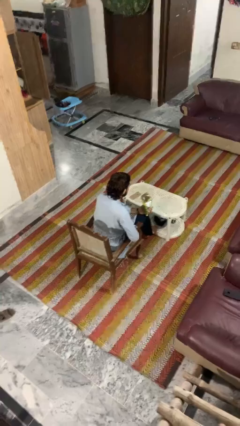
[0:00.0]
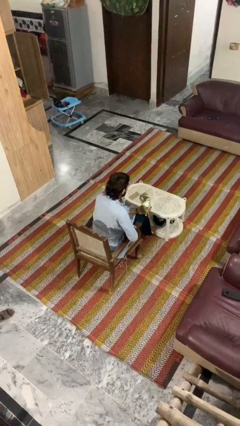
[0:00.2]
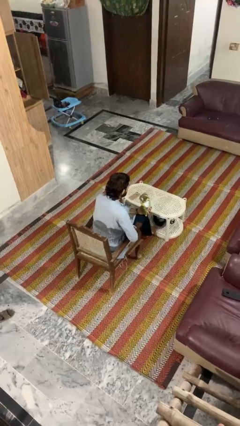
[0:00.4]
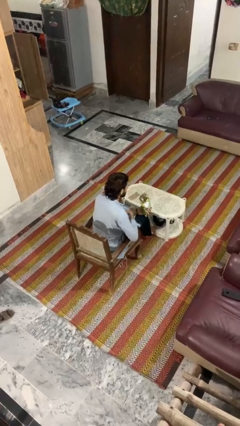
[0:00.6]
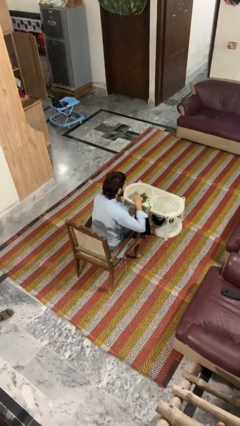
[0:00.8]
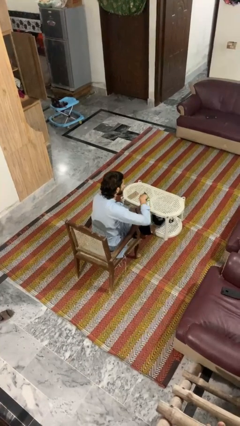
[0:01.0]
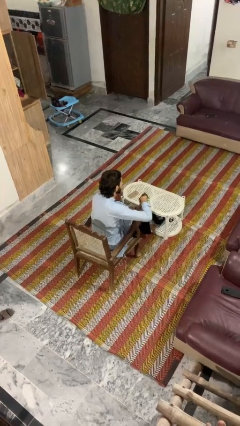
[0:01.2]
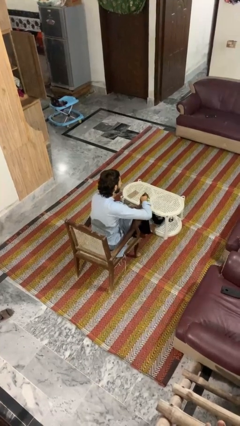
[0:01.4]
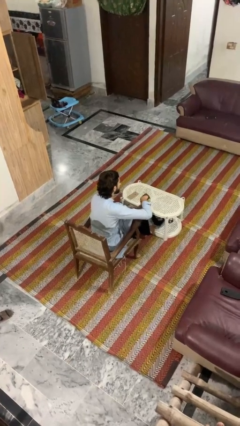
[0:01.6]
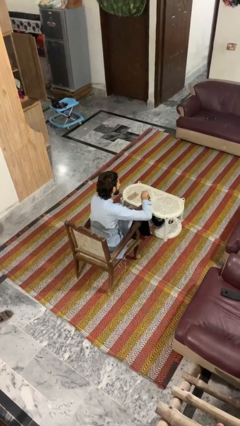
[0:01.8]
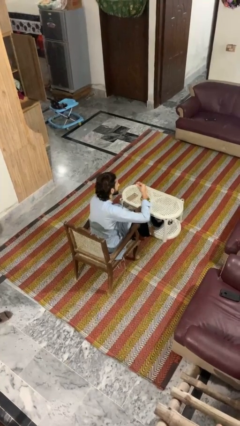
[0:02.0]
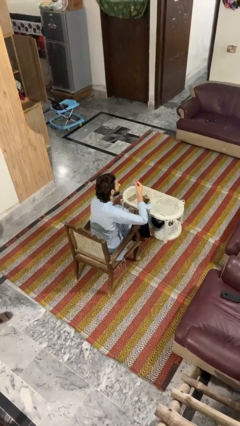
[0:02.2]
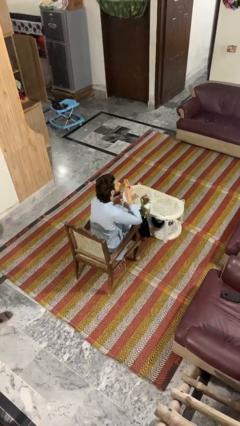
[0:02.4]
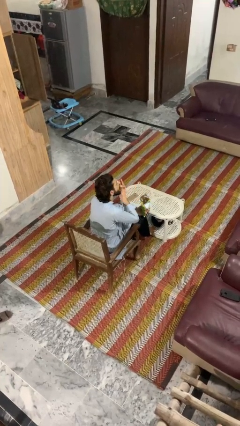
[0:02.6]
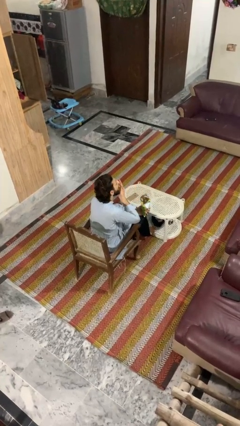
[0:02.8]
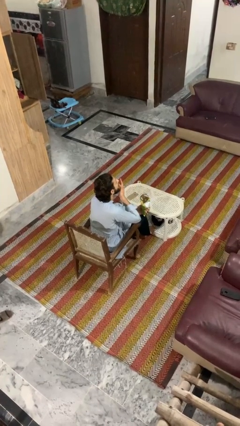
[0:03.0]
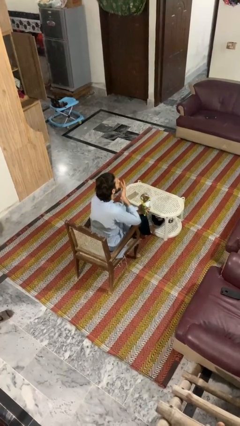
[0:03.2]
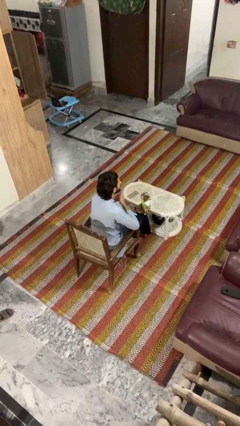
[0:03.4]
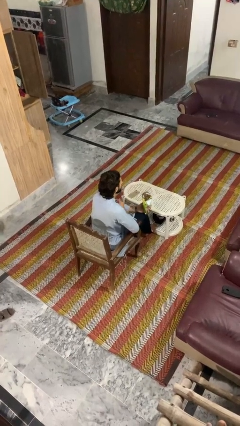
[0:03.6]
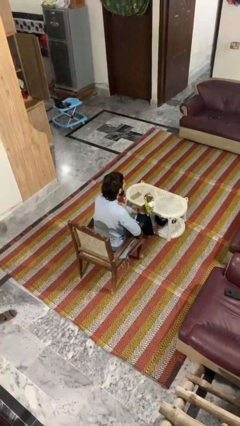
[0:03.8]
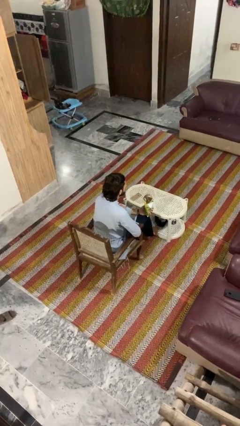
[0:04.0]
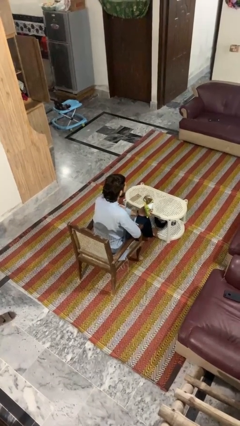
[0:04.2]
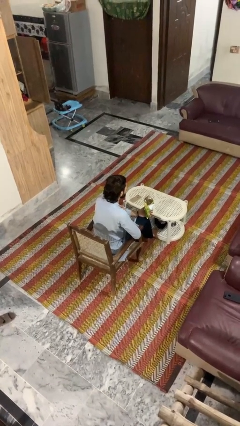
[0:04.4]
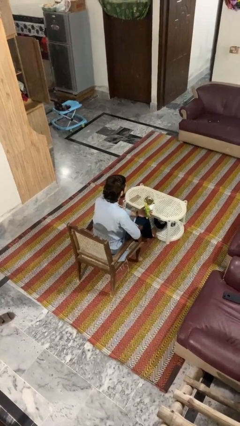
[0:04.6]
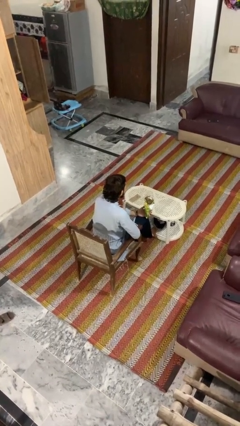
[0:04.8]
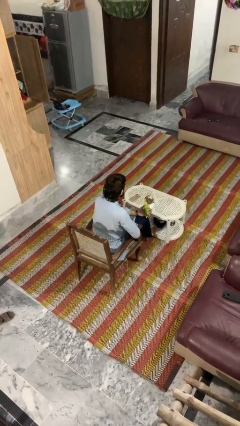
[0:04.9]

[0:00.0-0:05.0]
person eats snack from bag

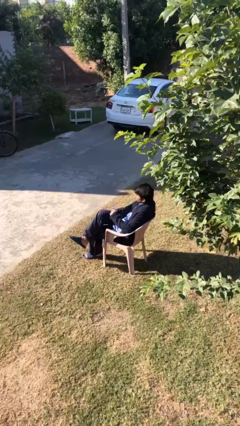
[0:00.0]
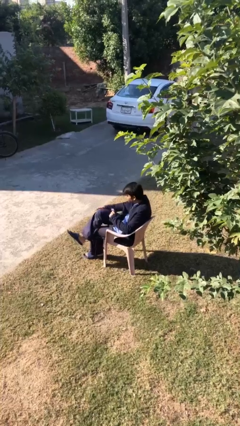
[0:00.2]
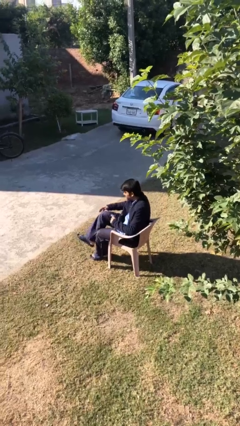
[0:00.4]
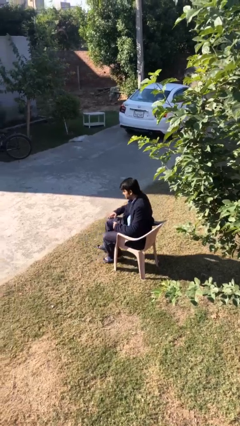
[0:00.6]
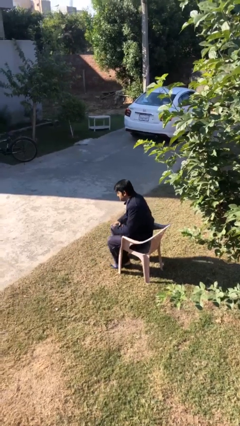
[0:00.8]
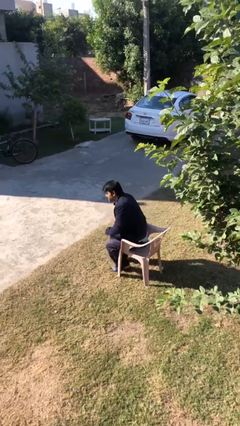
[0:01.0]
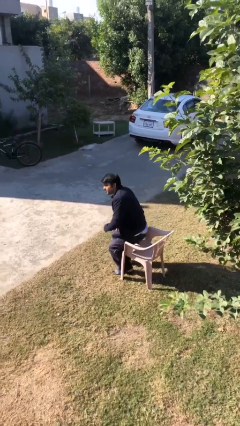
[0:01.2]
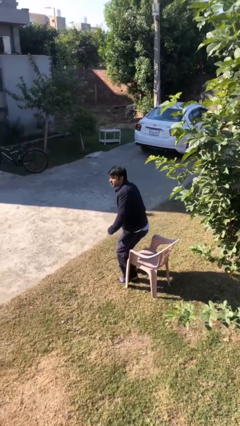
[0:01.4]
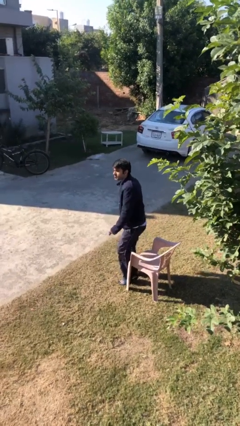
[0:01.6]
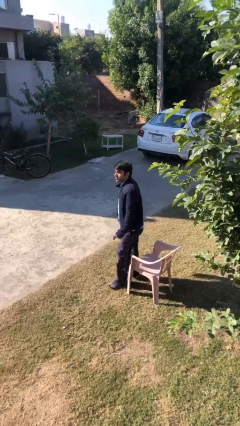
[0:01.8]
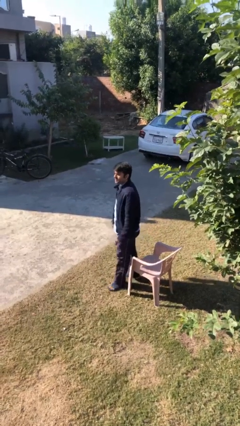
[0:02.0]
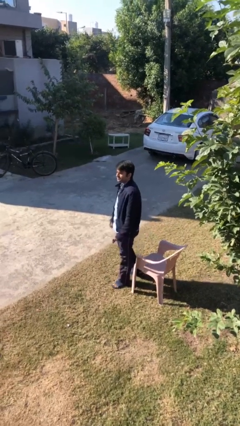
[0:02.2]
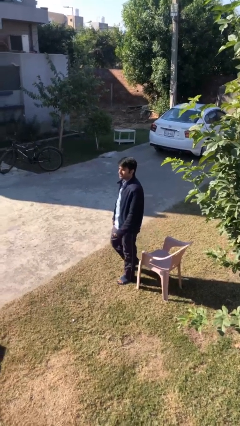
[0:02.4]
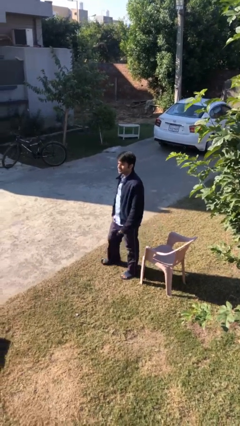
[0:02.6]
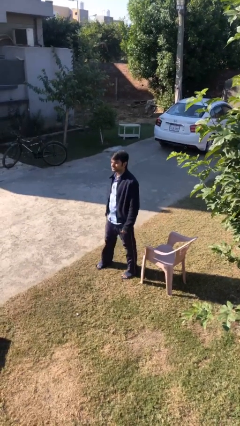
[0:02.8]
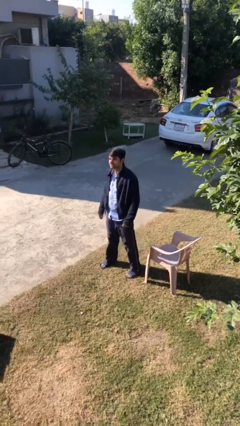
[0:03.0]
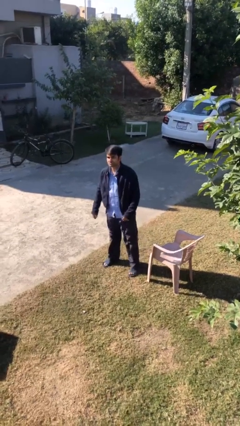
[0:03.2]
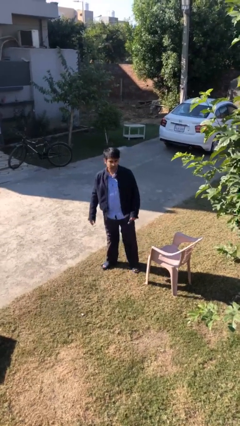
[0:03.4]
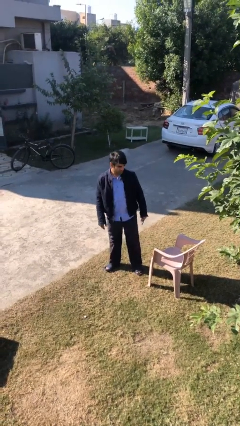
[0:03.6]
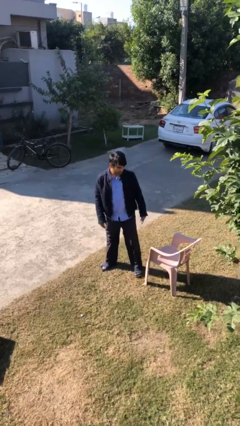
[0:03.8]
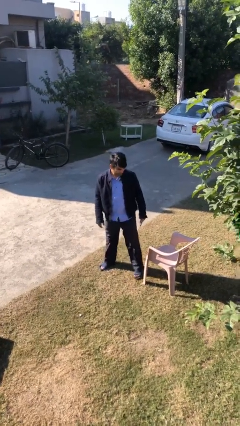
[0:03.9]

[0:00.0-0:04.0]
person stands up

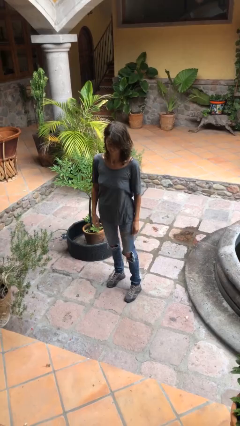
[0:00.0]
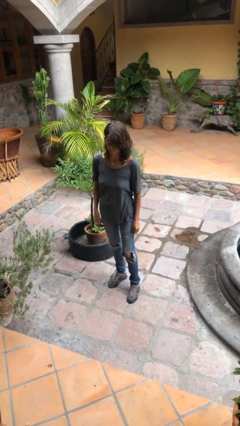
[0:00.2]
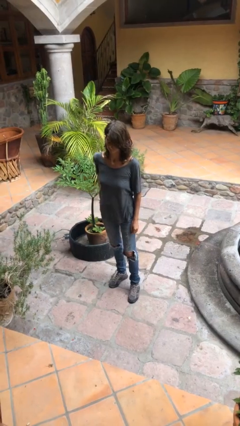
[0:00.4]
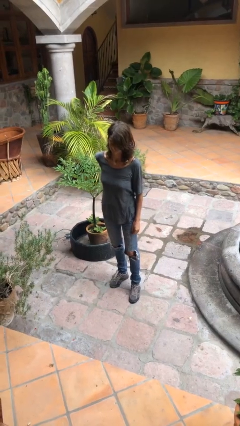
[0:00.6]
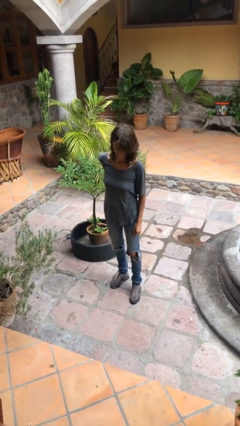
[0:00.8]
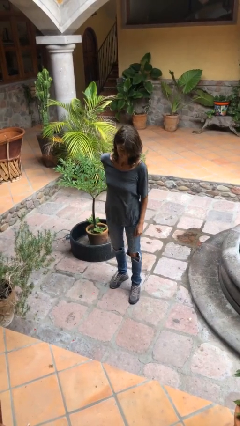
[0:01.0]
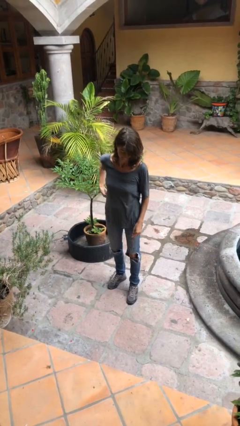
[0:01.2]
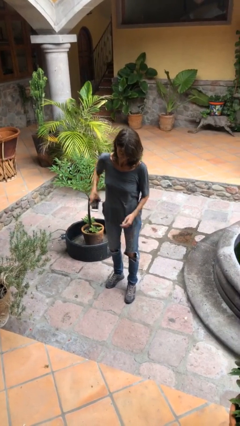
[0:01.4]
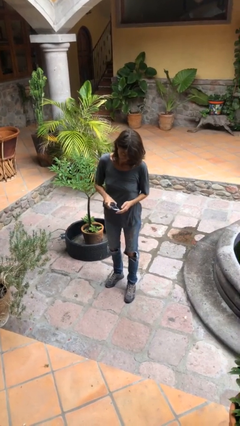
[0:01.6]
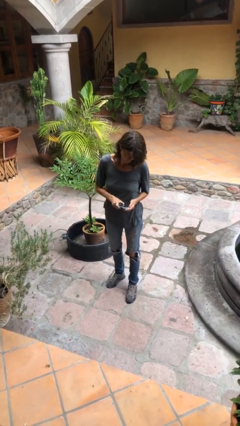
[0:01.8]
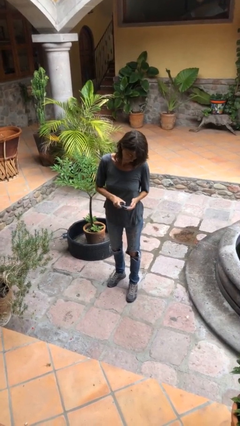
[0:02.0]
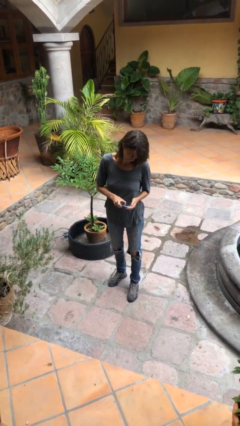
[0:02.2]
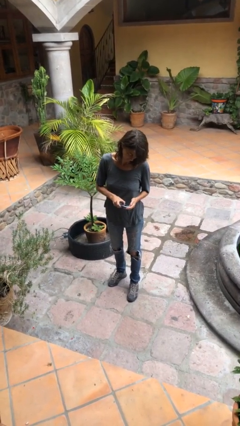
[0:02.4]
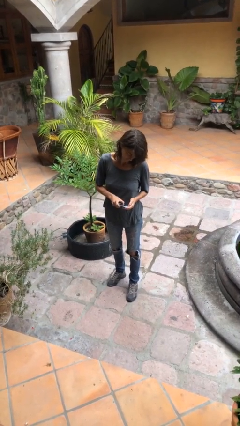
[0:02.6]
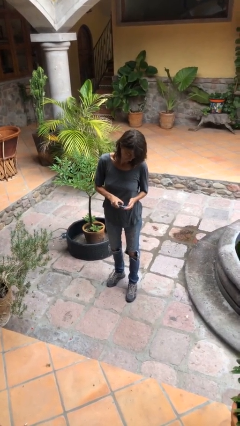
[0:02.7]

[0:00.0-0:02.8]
person takes phone from pocket

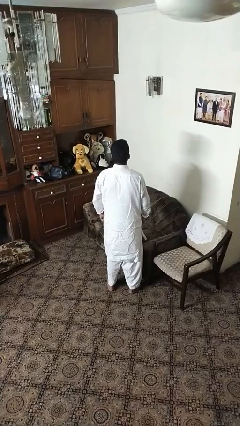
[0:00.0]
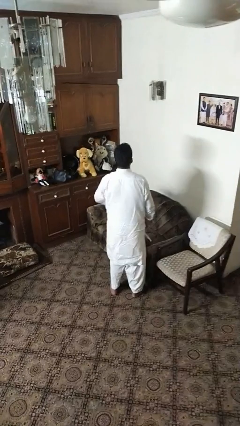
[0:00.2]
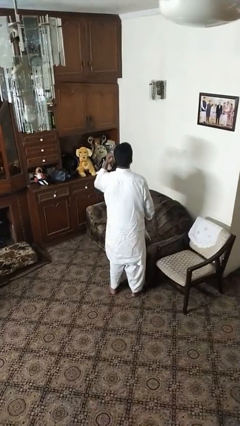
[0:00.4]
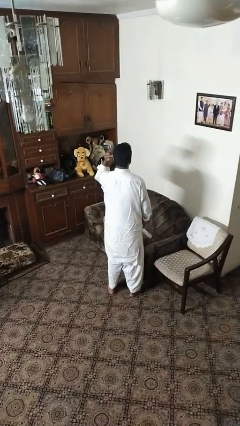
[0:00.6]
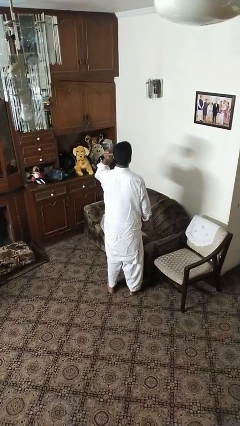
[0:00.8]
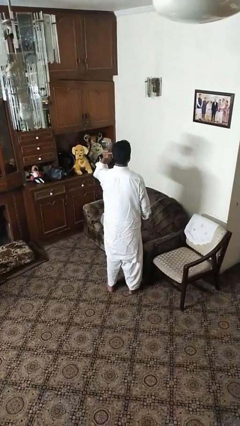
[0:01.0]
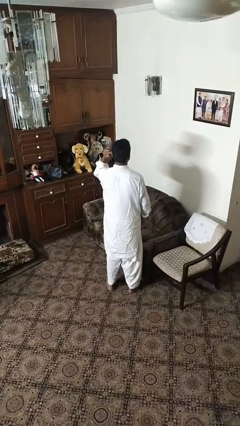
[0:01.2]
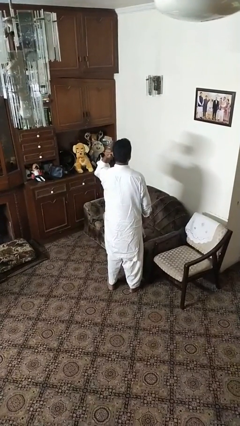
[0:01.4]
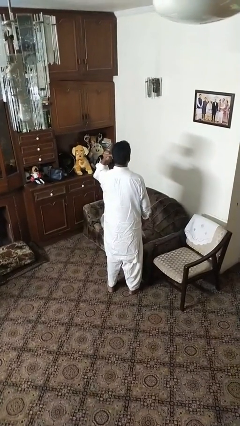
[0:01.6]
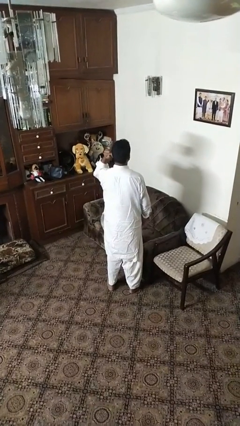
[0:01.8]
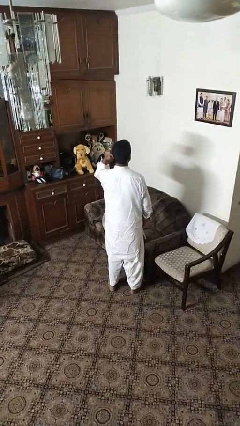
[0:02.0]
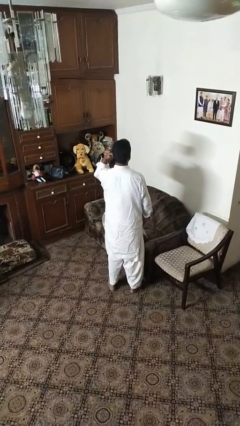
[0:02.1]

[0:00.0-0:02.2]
person gestures listen closely

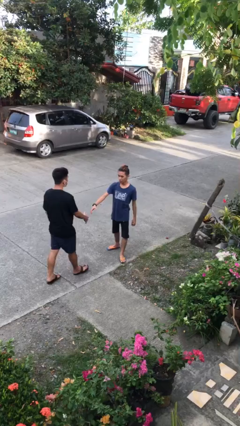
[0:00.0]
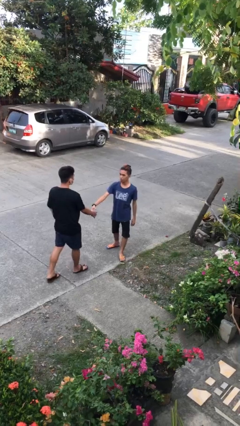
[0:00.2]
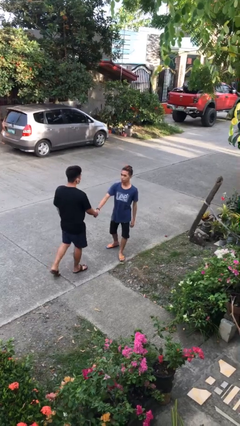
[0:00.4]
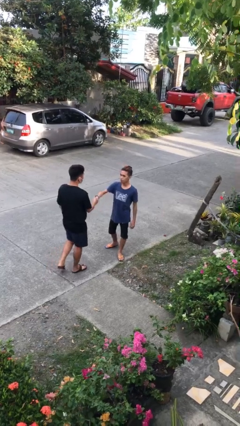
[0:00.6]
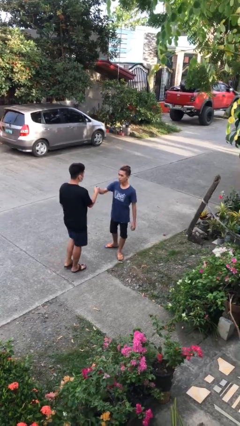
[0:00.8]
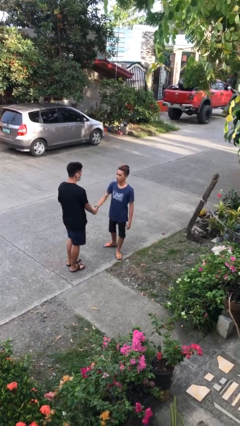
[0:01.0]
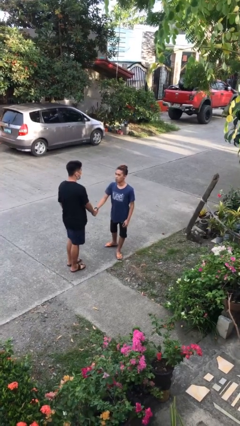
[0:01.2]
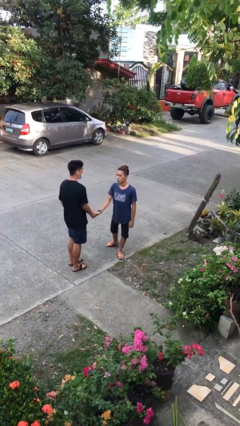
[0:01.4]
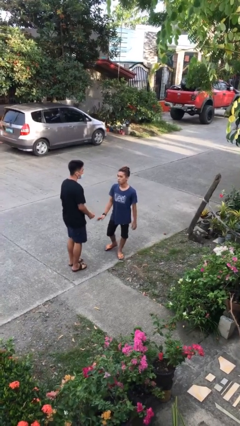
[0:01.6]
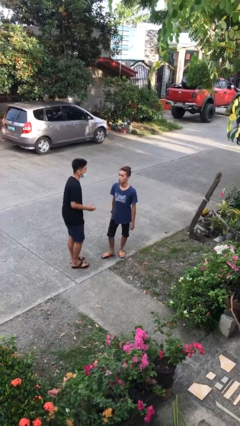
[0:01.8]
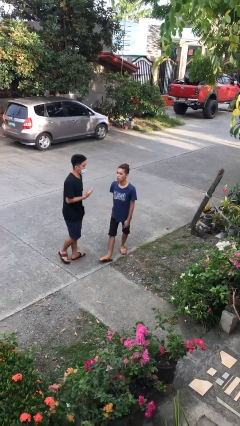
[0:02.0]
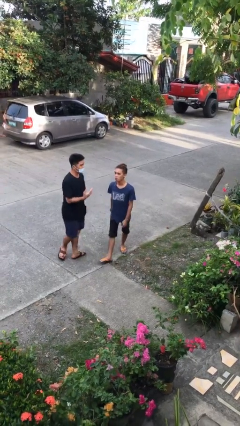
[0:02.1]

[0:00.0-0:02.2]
person shakes hand

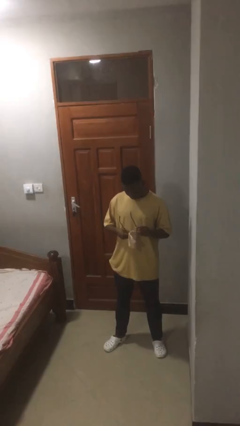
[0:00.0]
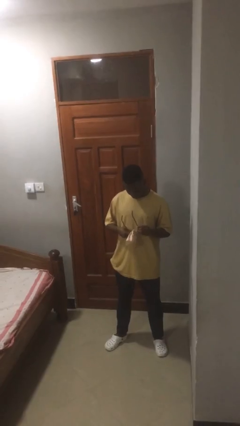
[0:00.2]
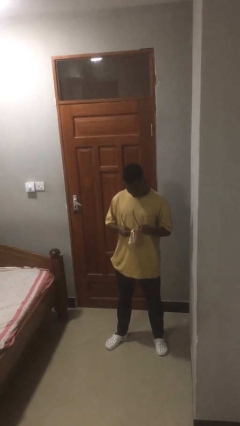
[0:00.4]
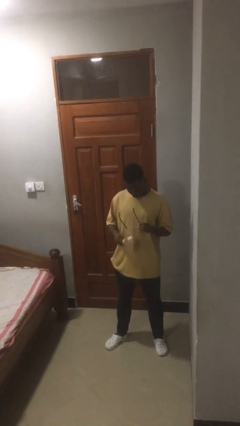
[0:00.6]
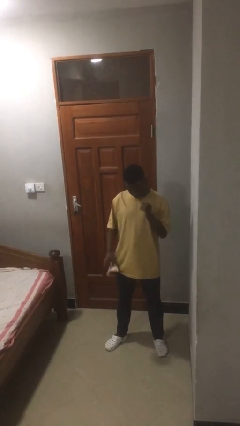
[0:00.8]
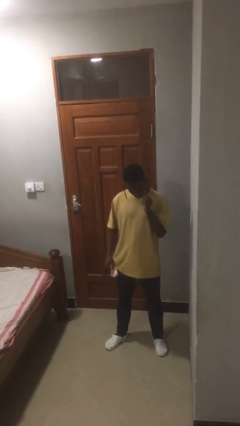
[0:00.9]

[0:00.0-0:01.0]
person cleans eyeglasses
